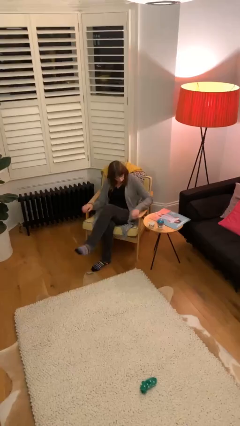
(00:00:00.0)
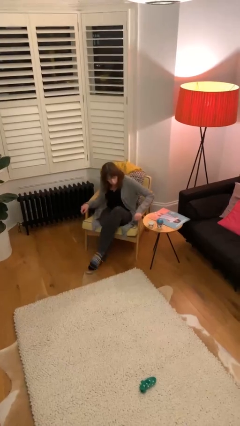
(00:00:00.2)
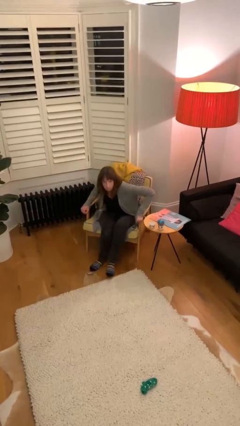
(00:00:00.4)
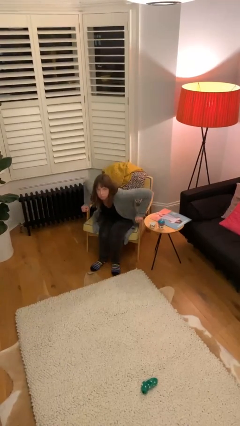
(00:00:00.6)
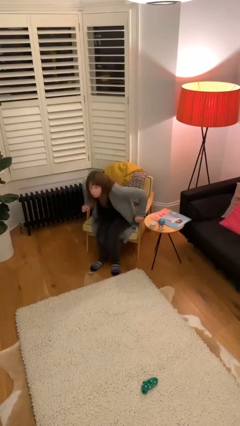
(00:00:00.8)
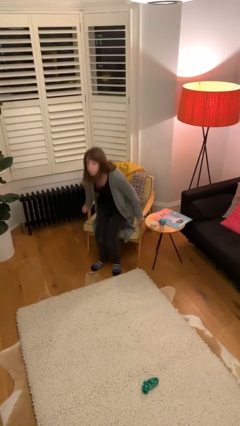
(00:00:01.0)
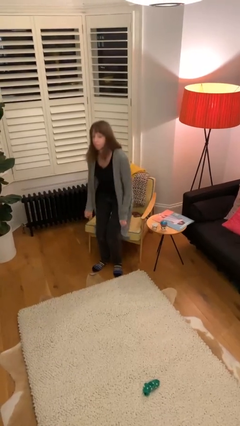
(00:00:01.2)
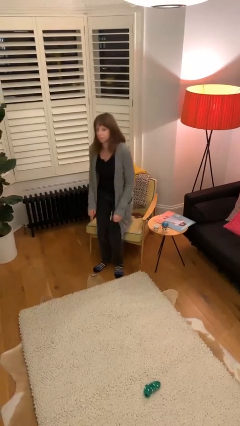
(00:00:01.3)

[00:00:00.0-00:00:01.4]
person stands up

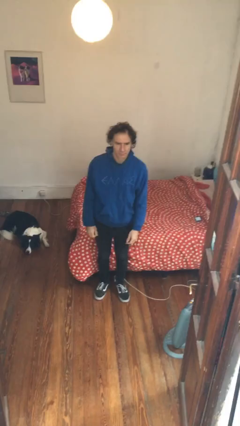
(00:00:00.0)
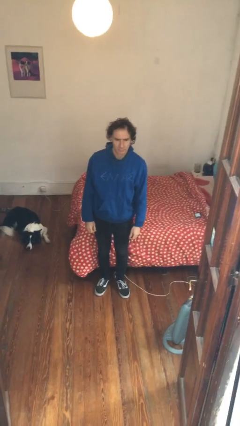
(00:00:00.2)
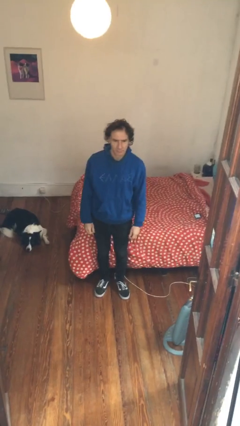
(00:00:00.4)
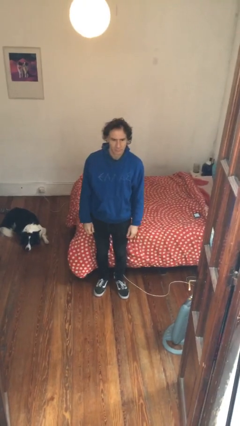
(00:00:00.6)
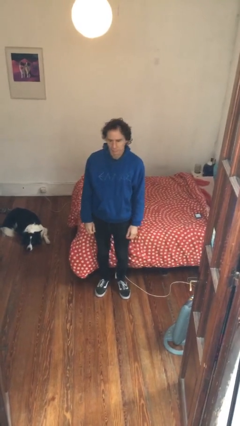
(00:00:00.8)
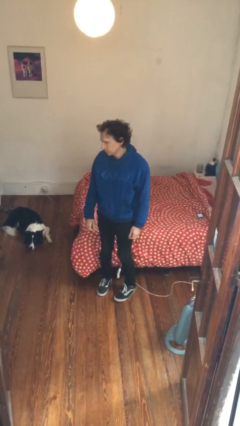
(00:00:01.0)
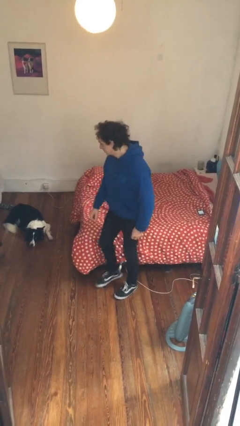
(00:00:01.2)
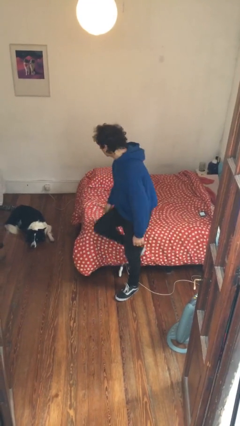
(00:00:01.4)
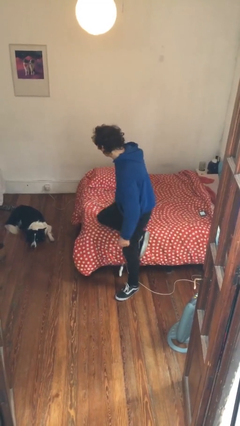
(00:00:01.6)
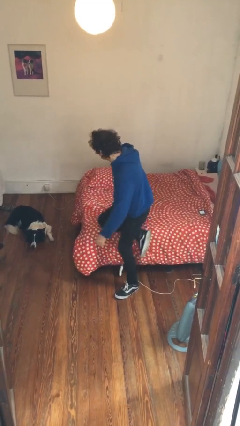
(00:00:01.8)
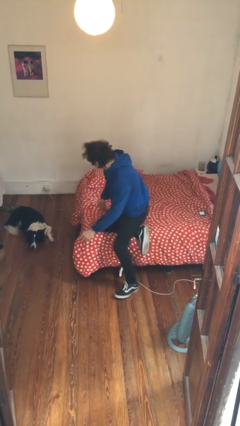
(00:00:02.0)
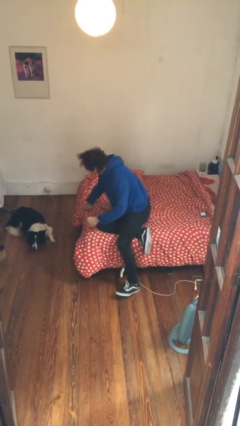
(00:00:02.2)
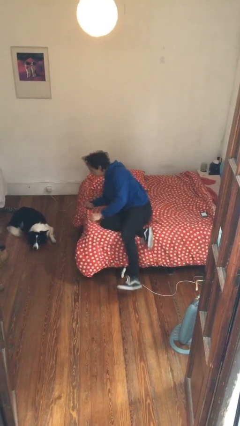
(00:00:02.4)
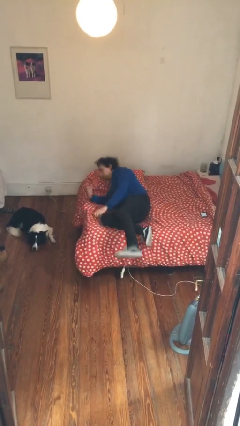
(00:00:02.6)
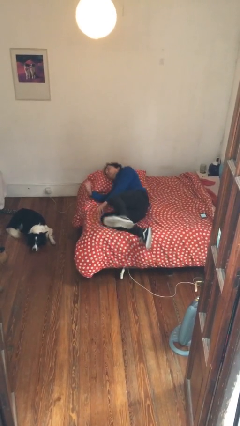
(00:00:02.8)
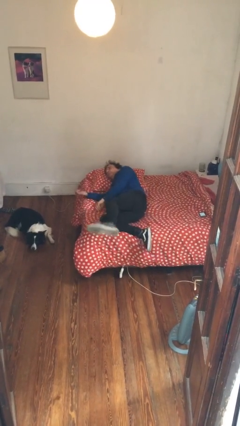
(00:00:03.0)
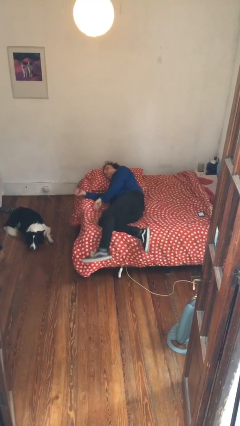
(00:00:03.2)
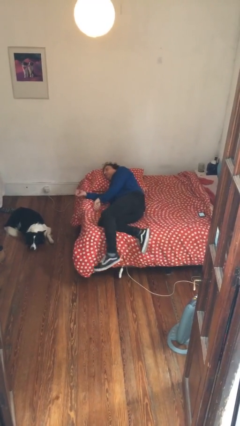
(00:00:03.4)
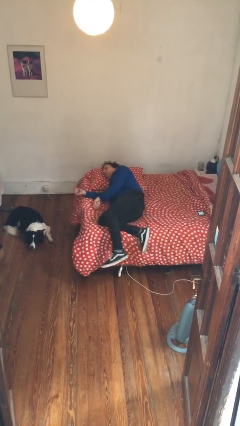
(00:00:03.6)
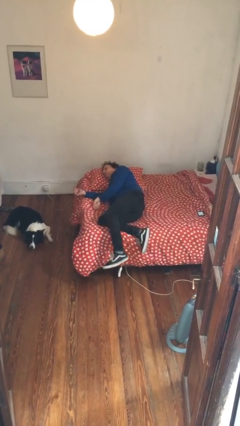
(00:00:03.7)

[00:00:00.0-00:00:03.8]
person lies down on bed

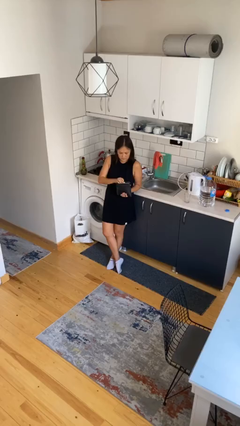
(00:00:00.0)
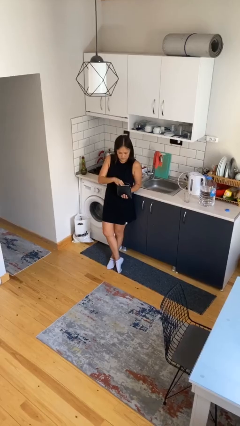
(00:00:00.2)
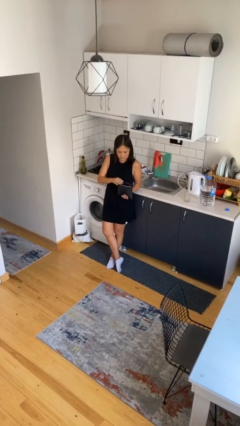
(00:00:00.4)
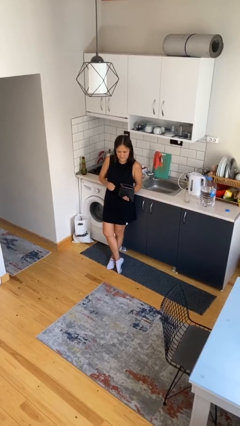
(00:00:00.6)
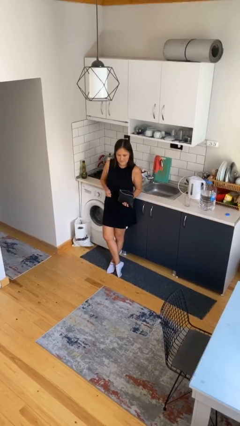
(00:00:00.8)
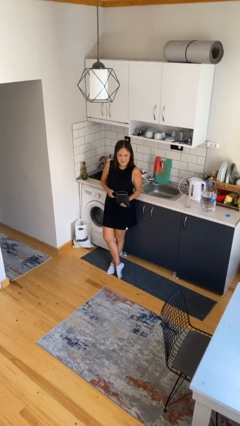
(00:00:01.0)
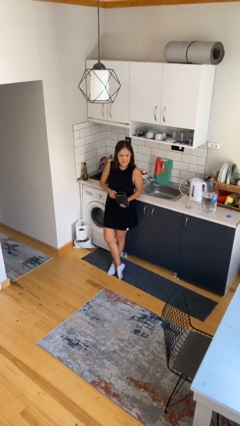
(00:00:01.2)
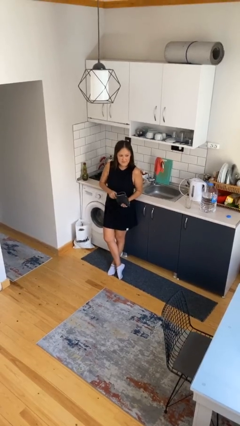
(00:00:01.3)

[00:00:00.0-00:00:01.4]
person puts object into purse

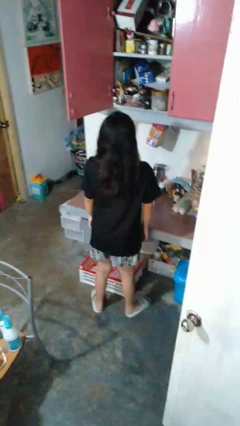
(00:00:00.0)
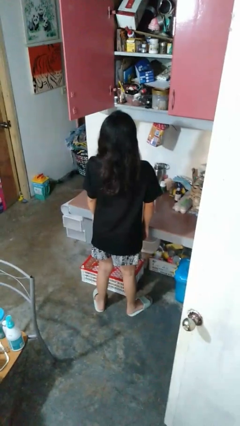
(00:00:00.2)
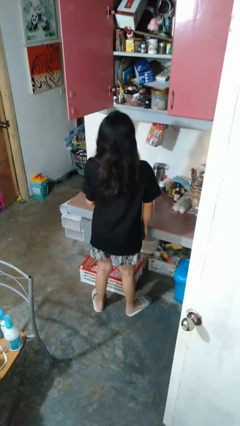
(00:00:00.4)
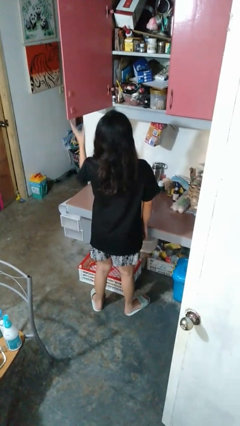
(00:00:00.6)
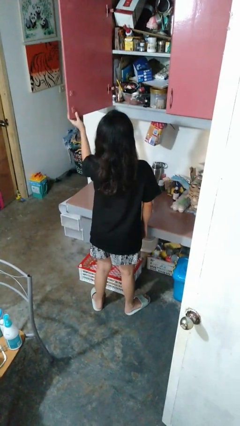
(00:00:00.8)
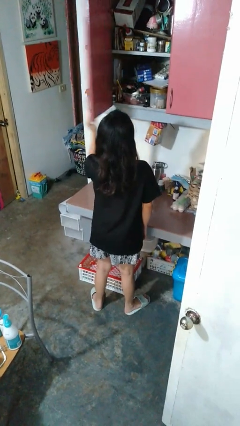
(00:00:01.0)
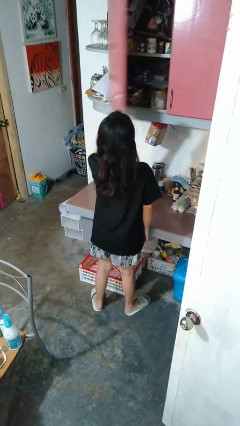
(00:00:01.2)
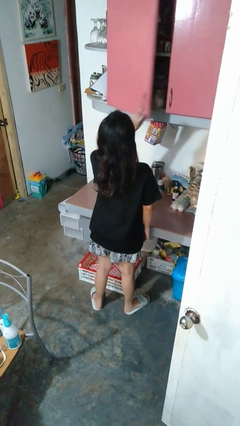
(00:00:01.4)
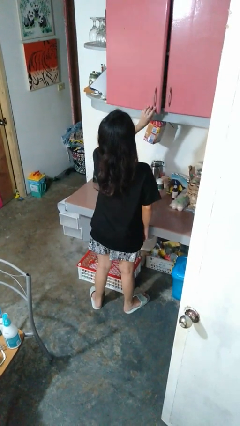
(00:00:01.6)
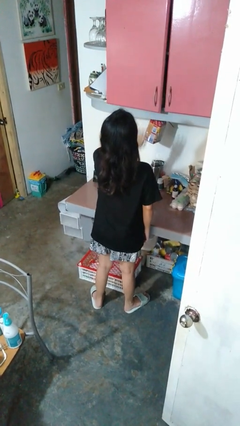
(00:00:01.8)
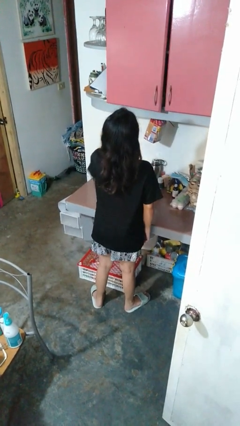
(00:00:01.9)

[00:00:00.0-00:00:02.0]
person closes cabinet

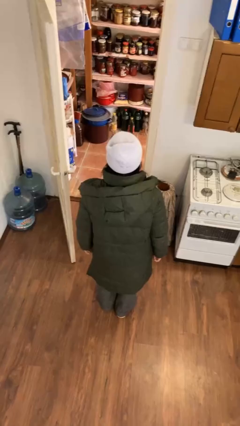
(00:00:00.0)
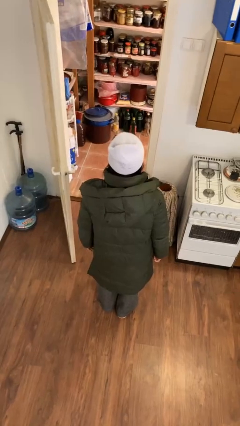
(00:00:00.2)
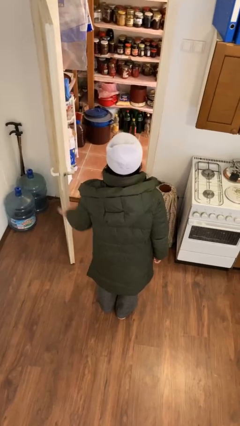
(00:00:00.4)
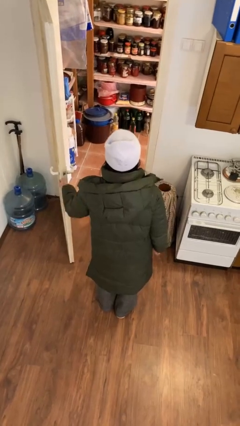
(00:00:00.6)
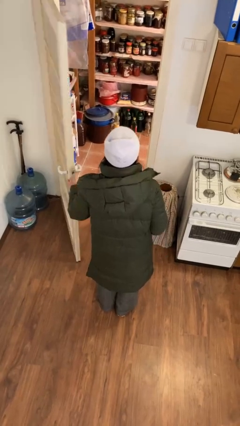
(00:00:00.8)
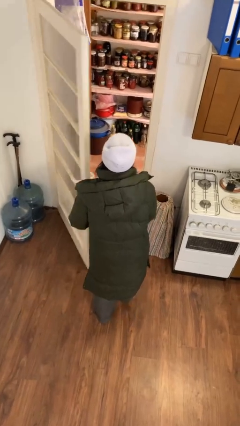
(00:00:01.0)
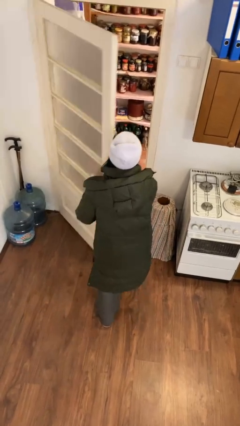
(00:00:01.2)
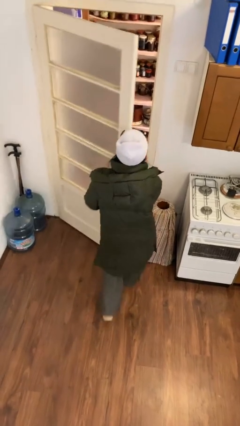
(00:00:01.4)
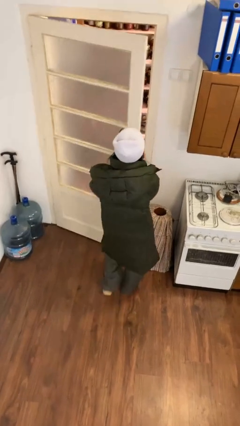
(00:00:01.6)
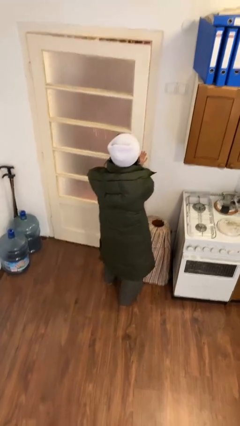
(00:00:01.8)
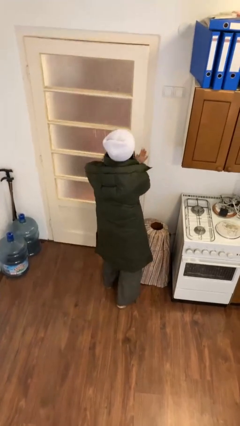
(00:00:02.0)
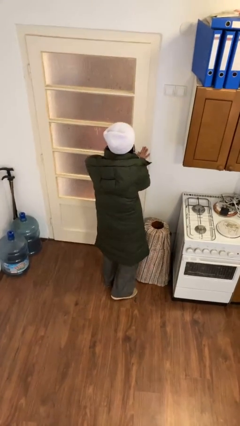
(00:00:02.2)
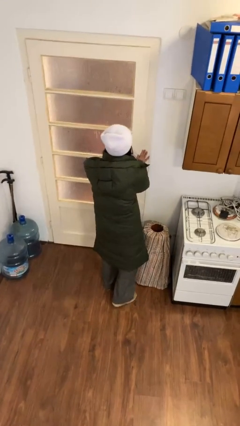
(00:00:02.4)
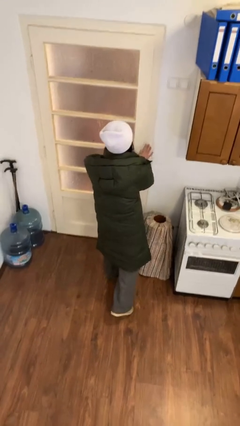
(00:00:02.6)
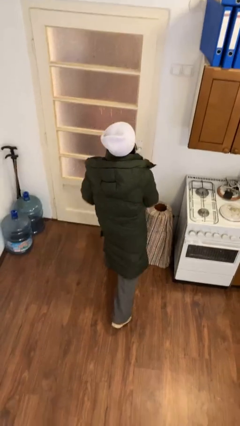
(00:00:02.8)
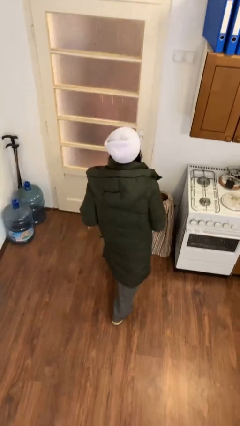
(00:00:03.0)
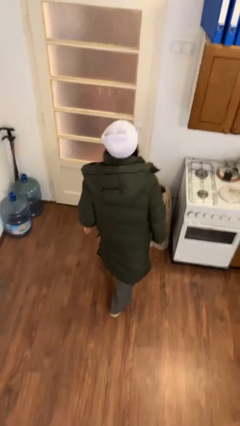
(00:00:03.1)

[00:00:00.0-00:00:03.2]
person closes facility door

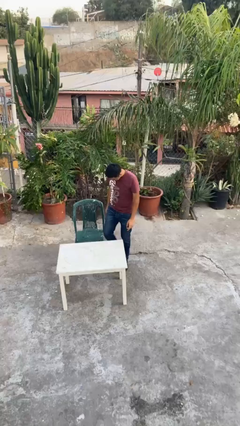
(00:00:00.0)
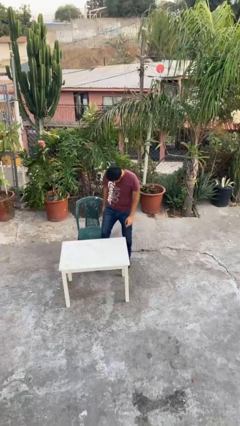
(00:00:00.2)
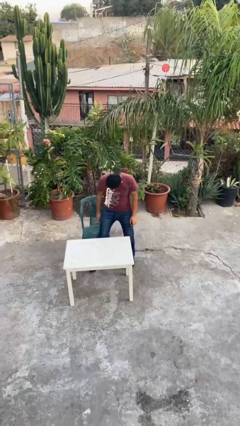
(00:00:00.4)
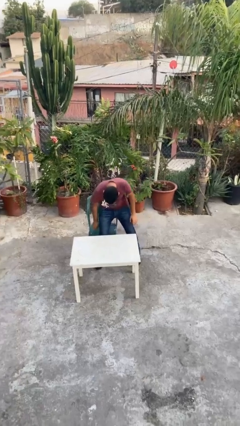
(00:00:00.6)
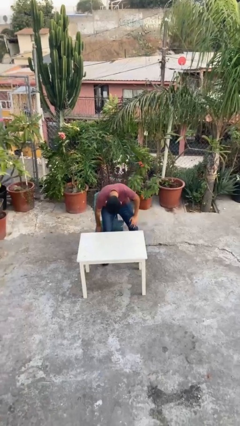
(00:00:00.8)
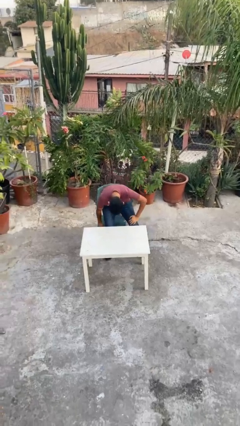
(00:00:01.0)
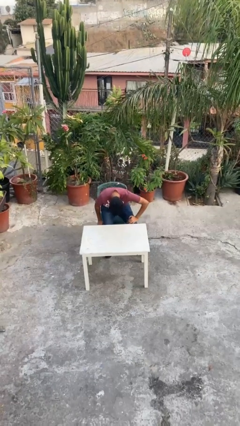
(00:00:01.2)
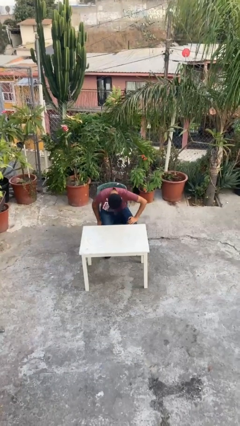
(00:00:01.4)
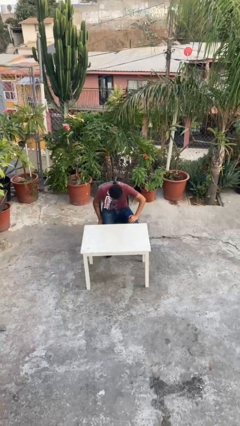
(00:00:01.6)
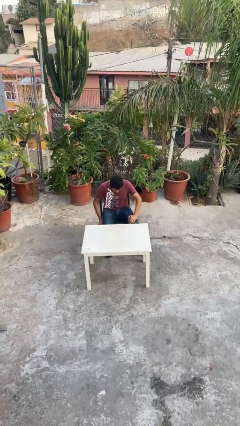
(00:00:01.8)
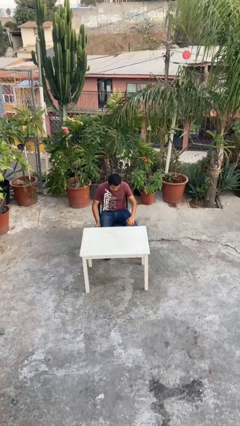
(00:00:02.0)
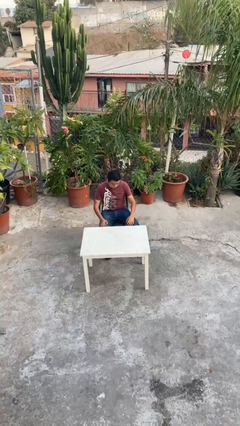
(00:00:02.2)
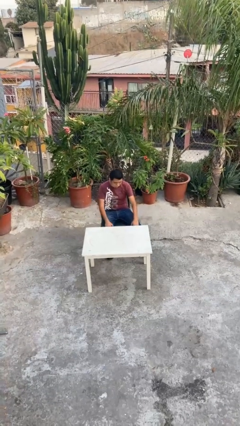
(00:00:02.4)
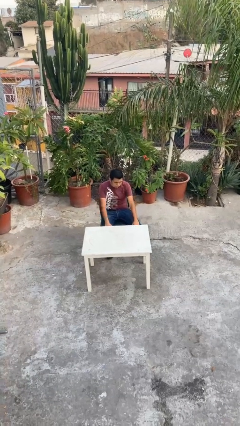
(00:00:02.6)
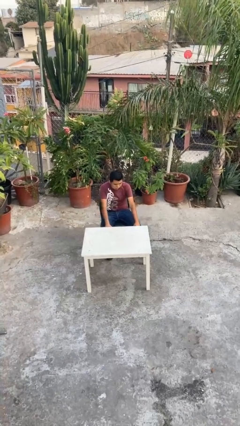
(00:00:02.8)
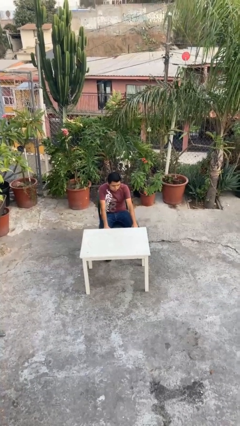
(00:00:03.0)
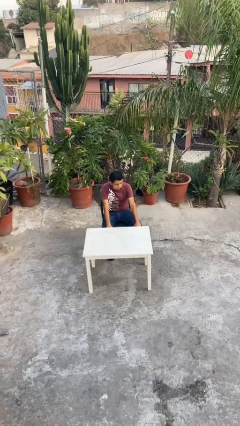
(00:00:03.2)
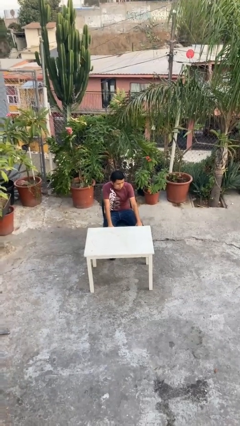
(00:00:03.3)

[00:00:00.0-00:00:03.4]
person sits down

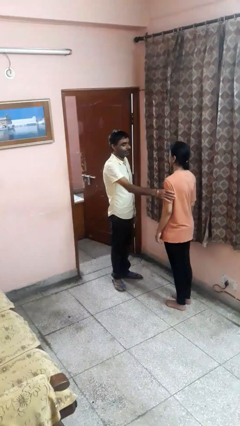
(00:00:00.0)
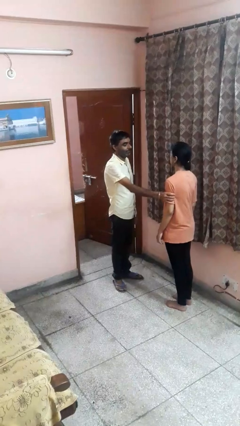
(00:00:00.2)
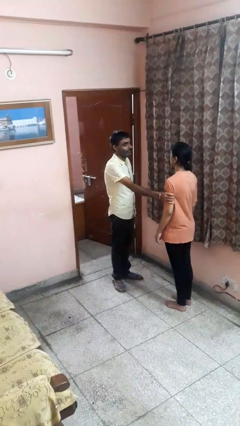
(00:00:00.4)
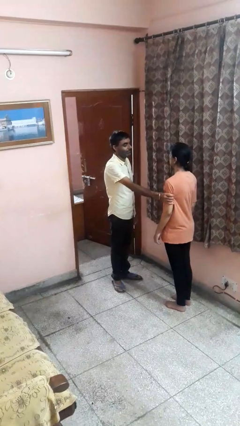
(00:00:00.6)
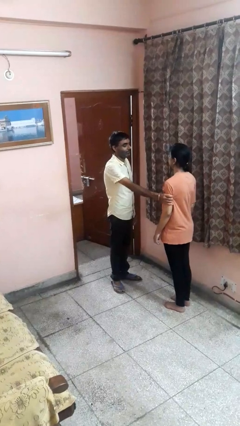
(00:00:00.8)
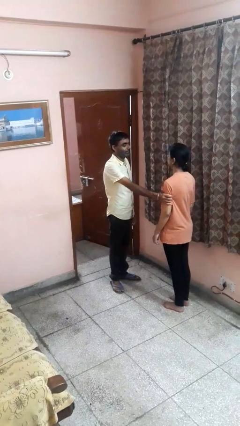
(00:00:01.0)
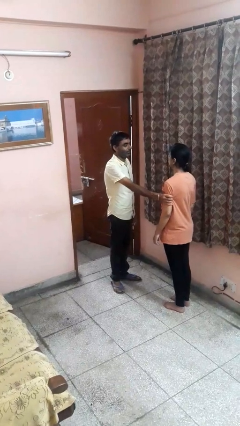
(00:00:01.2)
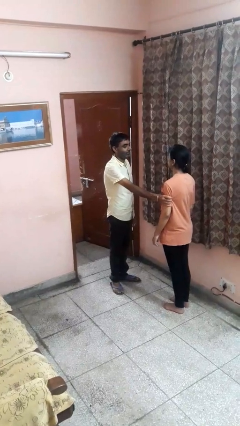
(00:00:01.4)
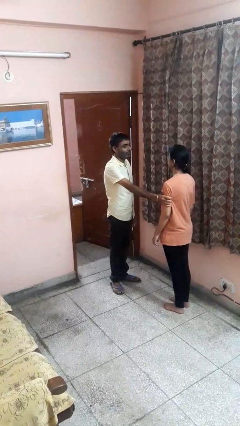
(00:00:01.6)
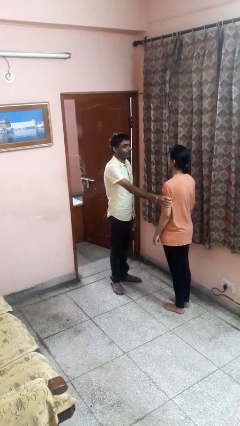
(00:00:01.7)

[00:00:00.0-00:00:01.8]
person grabs person by bicep
